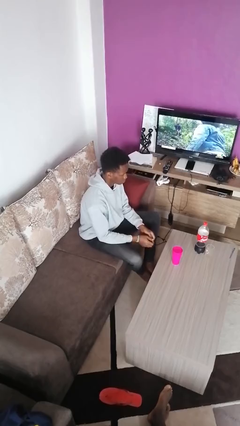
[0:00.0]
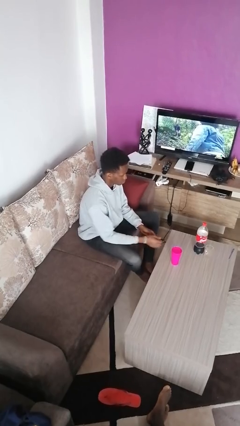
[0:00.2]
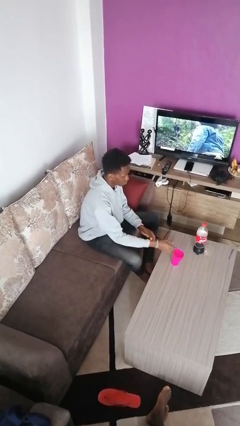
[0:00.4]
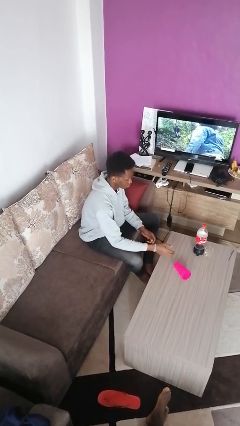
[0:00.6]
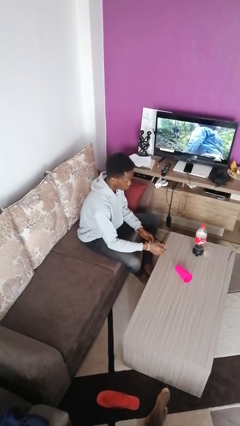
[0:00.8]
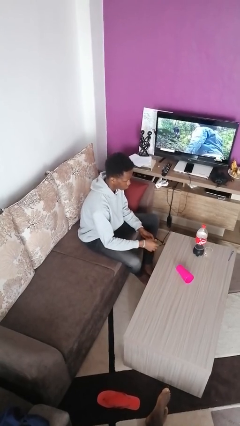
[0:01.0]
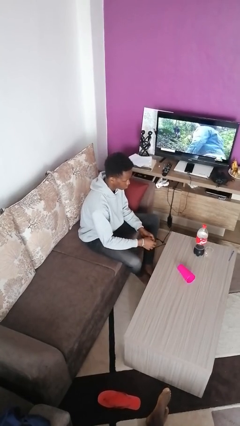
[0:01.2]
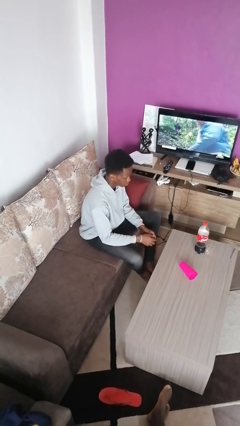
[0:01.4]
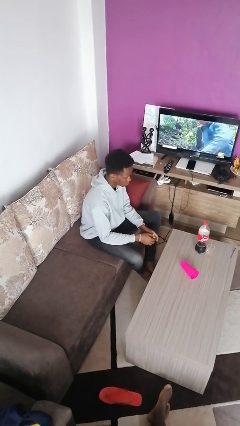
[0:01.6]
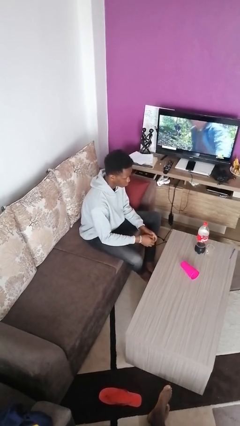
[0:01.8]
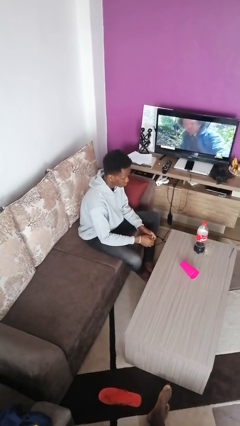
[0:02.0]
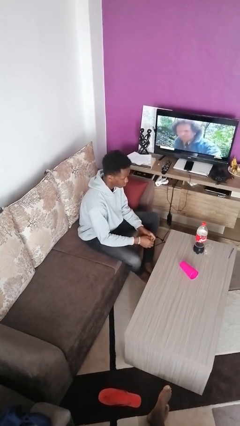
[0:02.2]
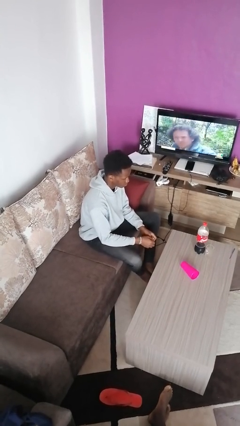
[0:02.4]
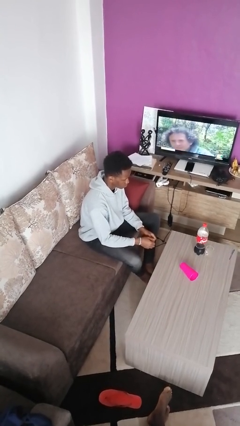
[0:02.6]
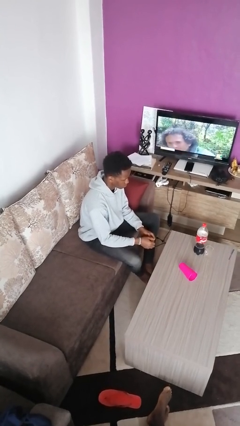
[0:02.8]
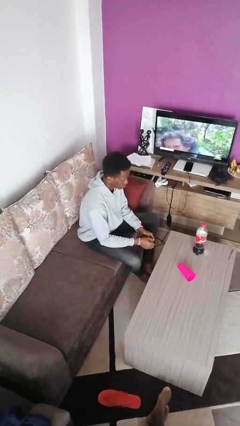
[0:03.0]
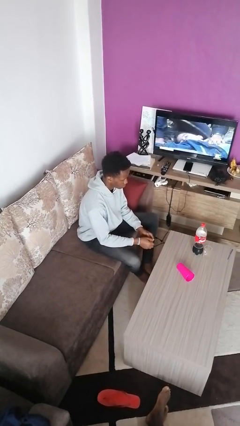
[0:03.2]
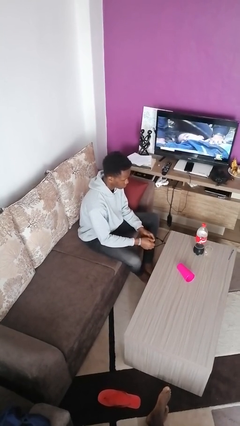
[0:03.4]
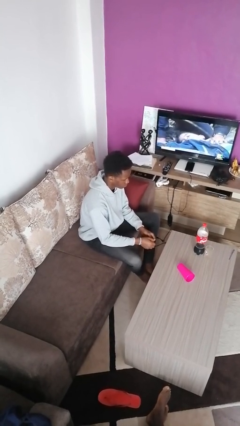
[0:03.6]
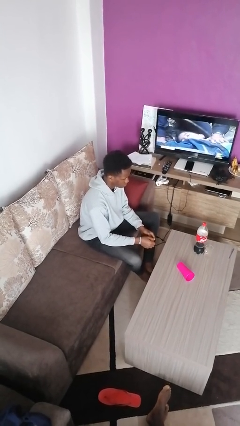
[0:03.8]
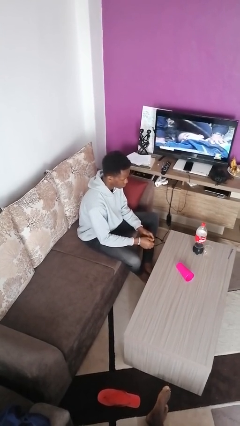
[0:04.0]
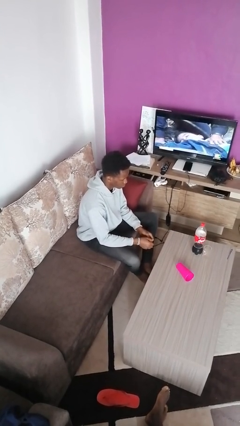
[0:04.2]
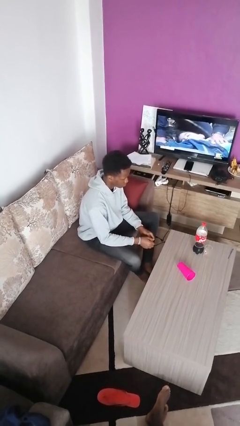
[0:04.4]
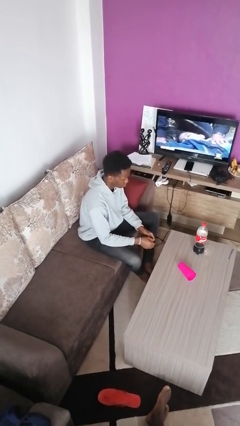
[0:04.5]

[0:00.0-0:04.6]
person knocks over glass

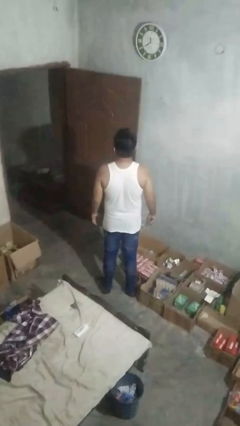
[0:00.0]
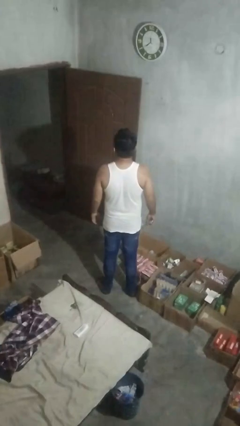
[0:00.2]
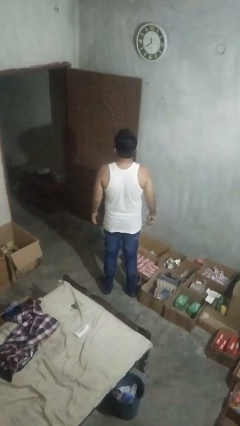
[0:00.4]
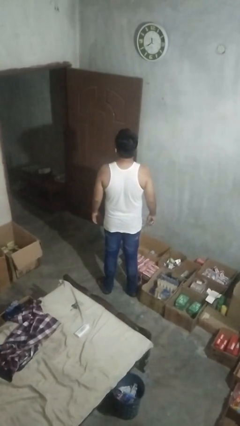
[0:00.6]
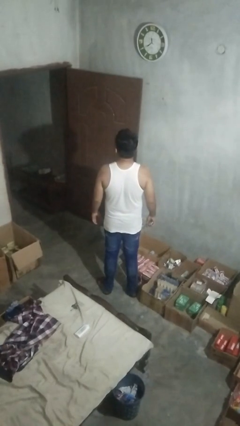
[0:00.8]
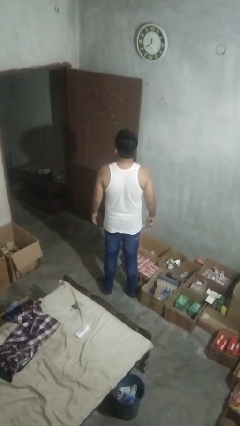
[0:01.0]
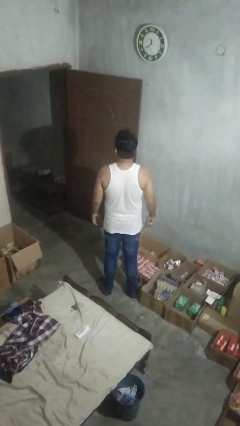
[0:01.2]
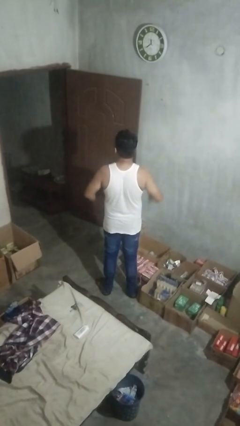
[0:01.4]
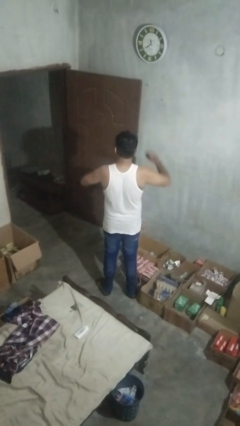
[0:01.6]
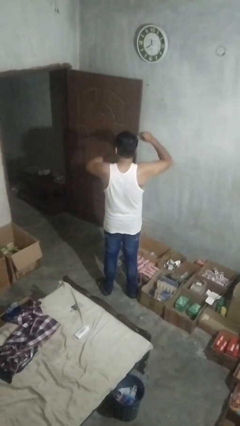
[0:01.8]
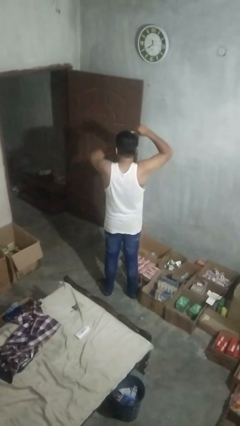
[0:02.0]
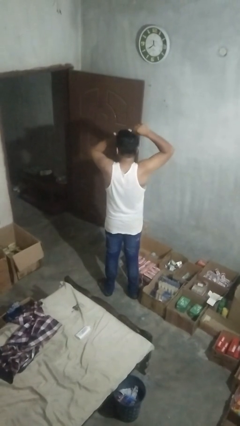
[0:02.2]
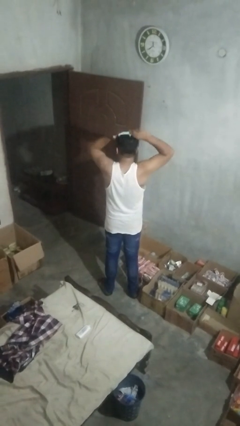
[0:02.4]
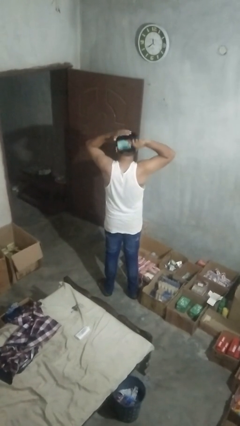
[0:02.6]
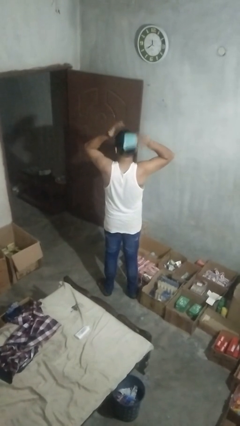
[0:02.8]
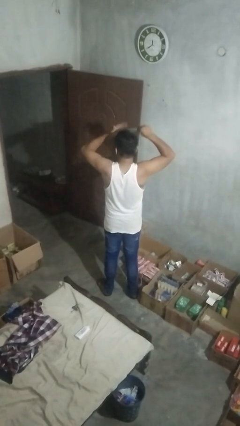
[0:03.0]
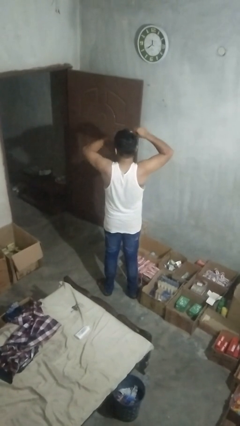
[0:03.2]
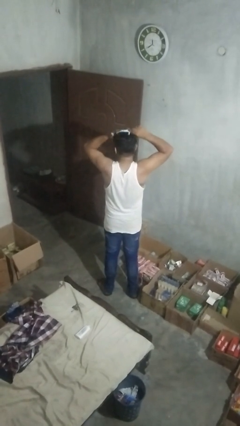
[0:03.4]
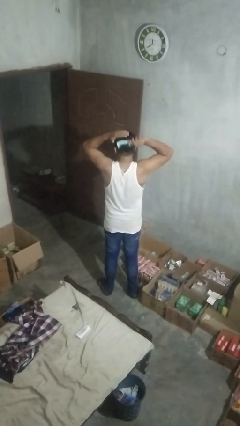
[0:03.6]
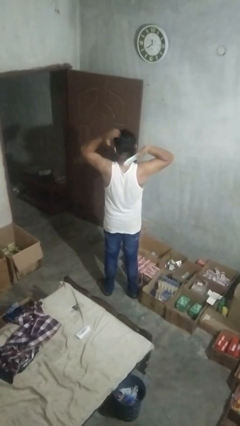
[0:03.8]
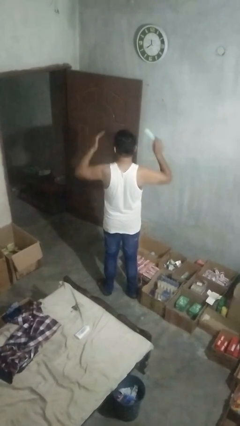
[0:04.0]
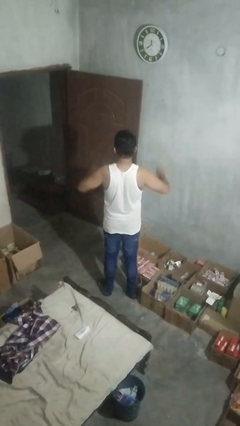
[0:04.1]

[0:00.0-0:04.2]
person brushes hair

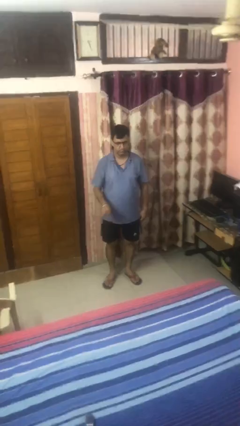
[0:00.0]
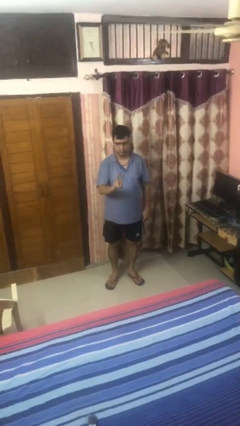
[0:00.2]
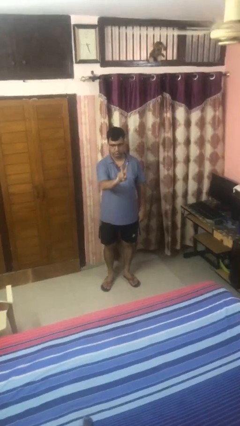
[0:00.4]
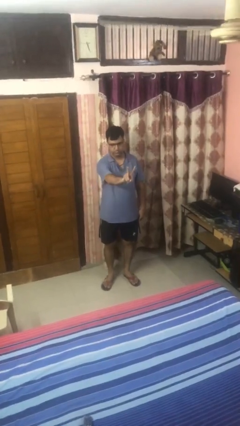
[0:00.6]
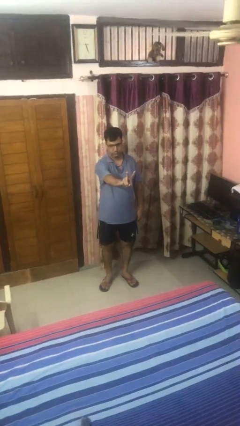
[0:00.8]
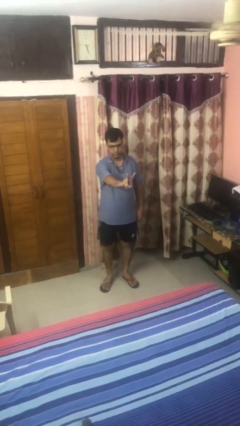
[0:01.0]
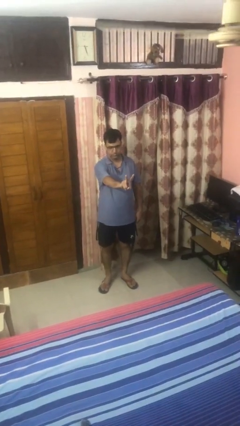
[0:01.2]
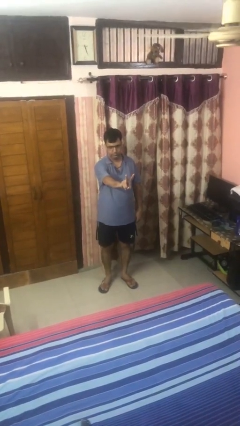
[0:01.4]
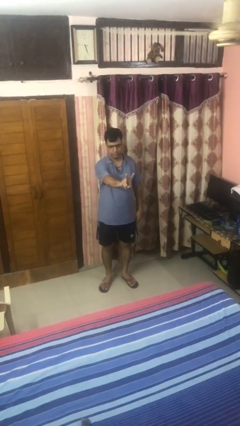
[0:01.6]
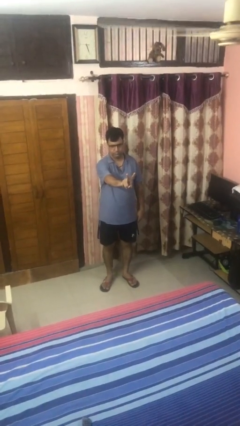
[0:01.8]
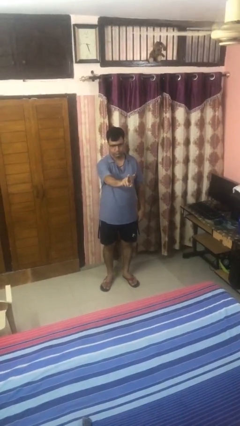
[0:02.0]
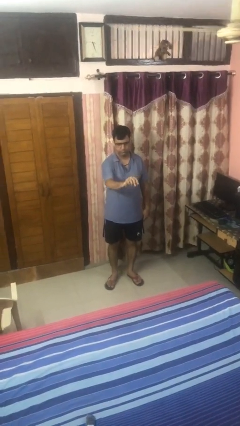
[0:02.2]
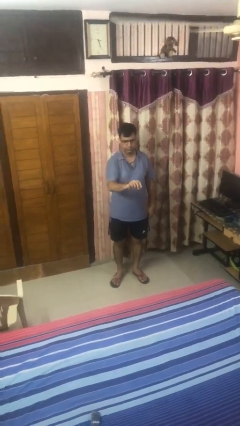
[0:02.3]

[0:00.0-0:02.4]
person gestures peace

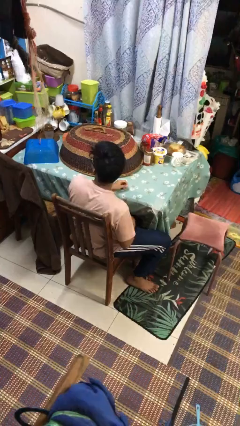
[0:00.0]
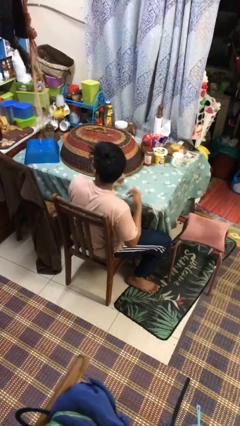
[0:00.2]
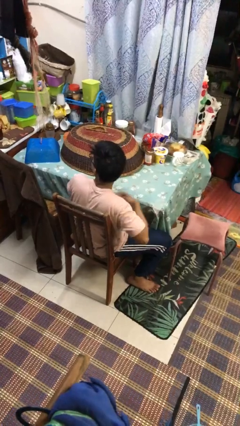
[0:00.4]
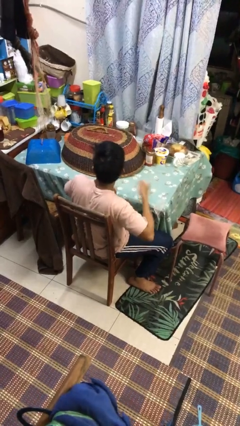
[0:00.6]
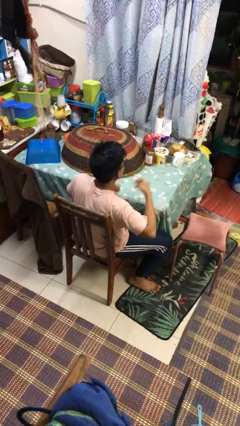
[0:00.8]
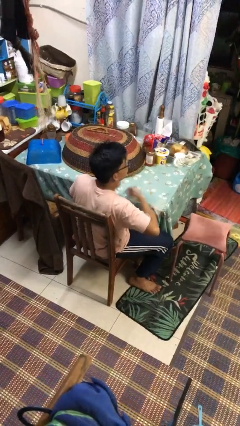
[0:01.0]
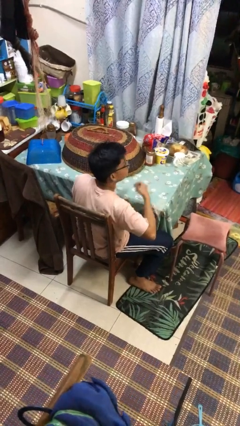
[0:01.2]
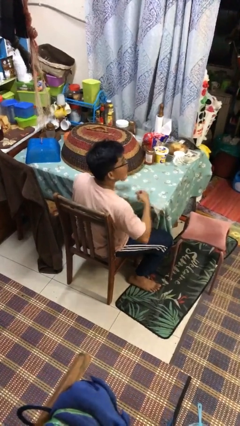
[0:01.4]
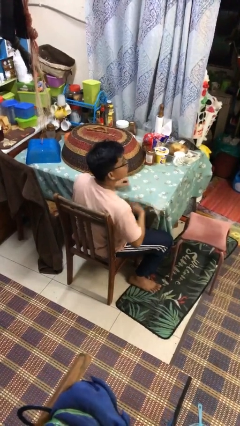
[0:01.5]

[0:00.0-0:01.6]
person drums on chest

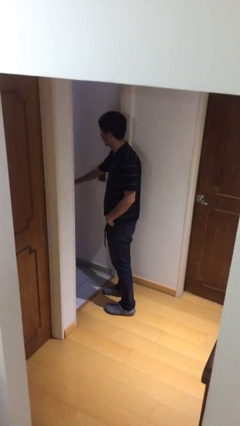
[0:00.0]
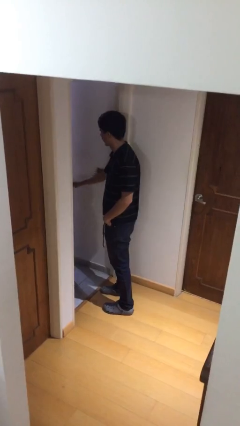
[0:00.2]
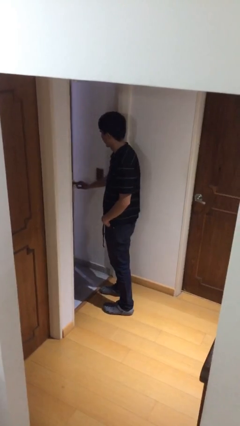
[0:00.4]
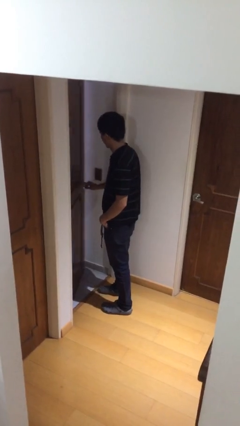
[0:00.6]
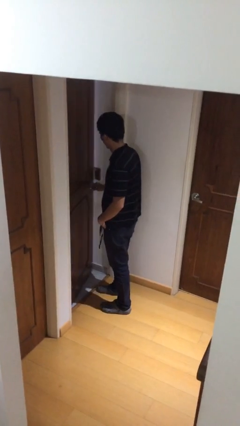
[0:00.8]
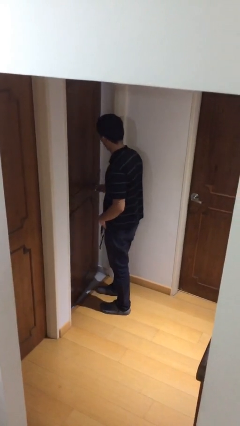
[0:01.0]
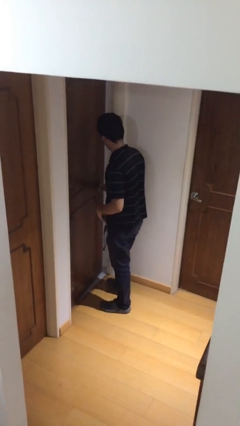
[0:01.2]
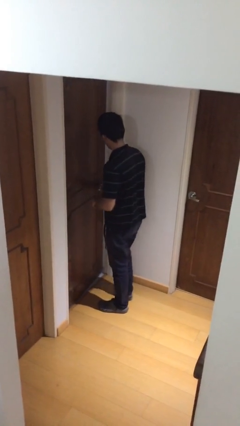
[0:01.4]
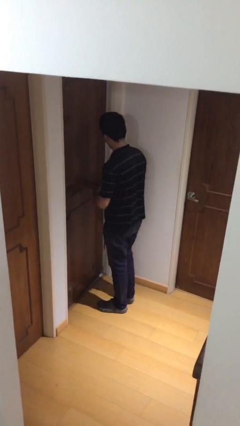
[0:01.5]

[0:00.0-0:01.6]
person closes facility door

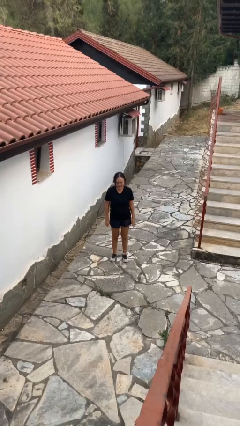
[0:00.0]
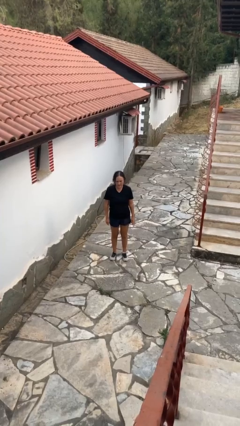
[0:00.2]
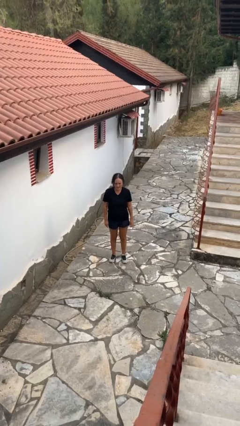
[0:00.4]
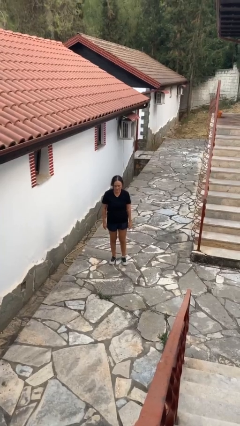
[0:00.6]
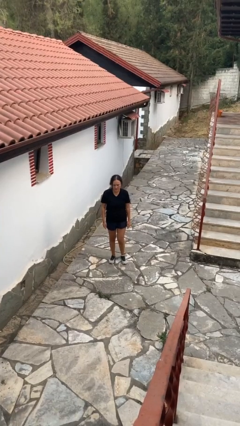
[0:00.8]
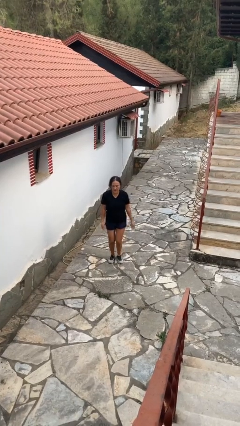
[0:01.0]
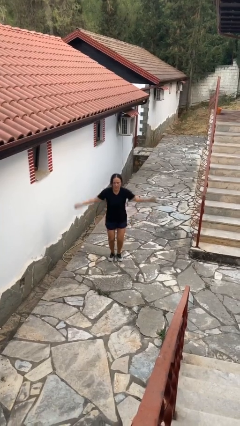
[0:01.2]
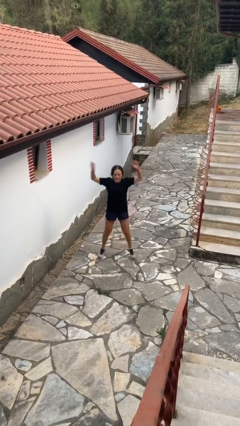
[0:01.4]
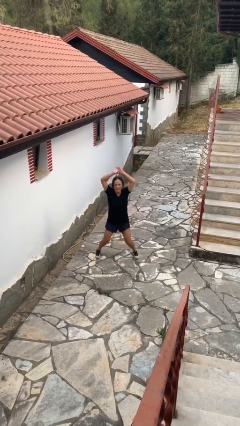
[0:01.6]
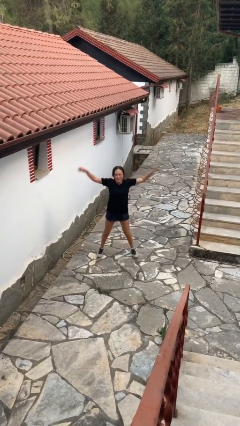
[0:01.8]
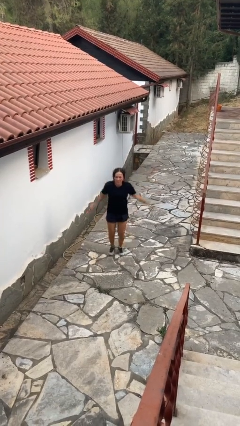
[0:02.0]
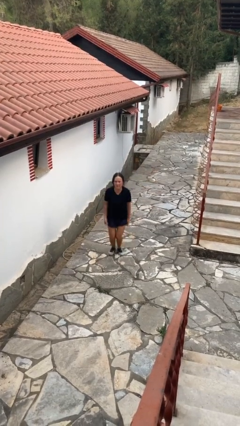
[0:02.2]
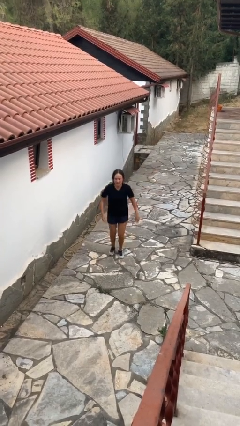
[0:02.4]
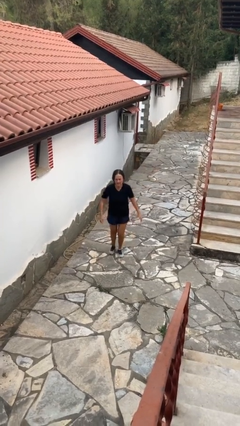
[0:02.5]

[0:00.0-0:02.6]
person exercises with jumping jacks

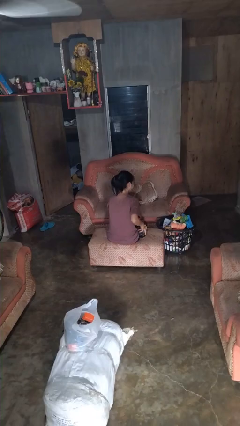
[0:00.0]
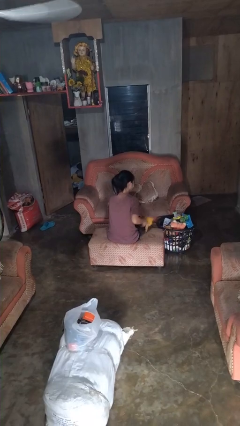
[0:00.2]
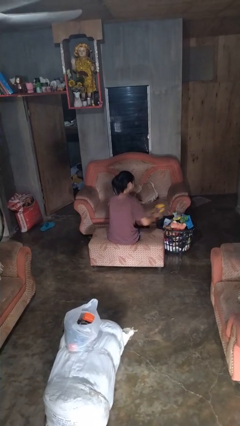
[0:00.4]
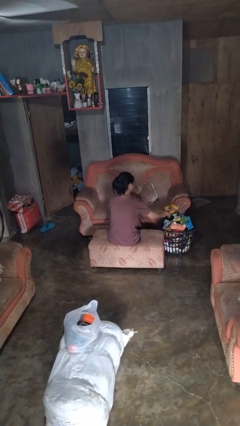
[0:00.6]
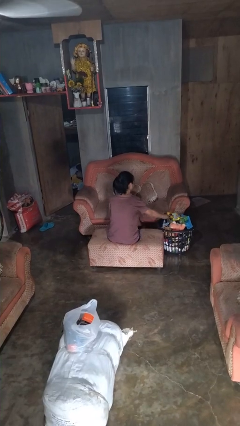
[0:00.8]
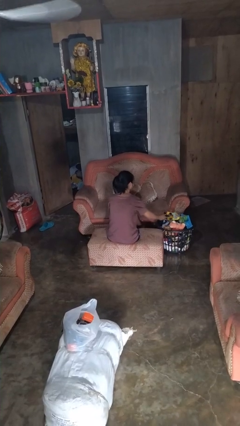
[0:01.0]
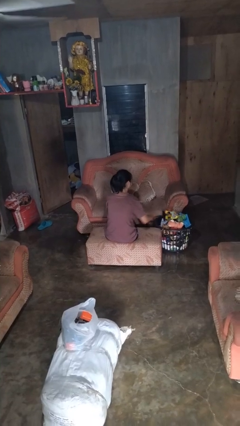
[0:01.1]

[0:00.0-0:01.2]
person puts object into basket
